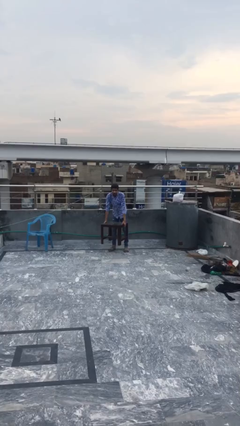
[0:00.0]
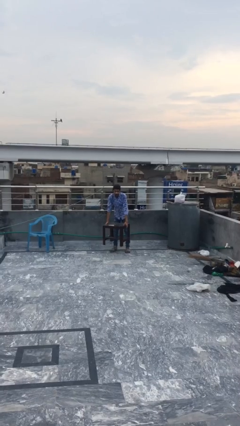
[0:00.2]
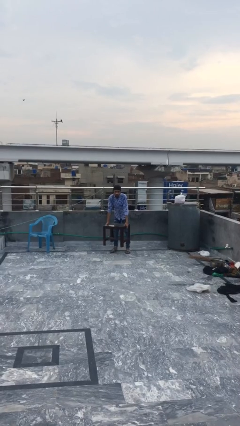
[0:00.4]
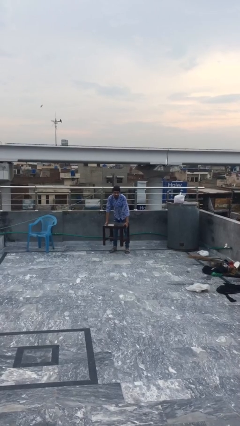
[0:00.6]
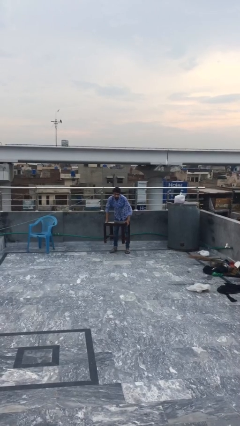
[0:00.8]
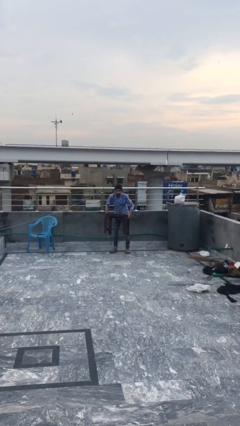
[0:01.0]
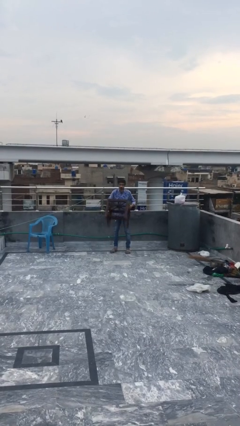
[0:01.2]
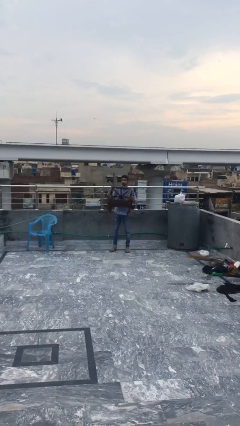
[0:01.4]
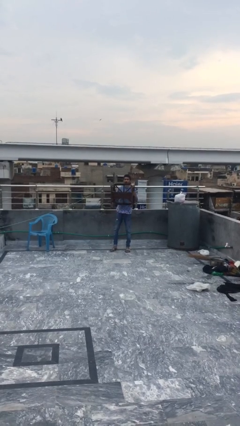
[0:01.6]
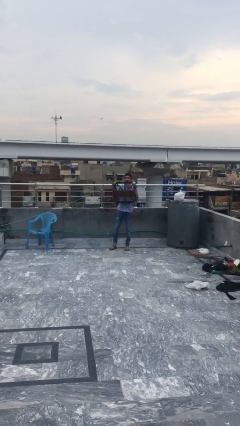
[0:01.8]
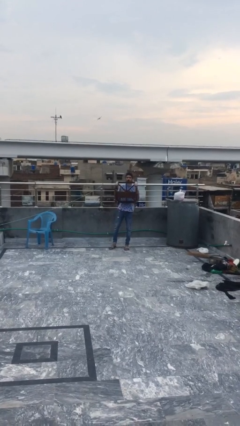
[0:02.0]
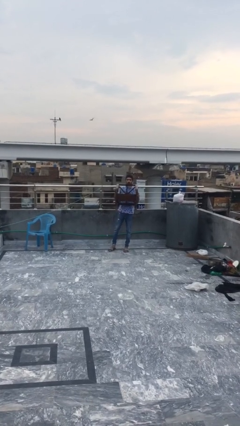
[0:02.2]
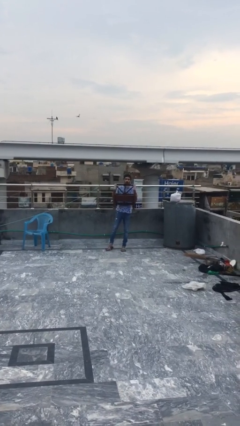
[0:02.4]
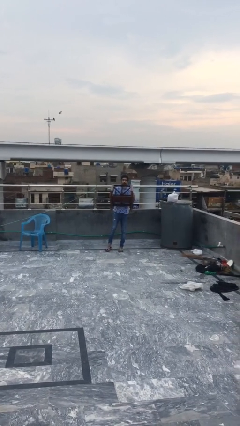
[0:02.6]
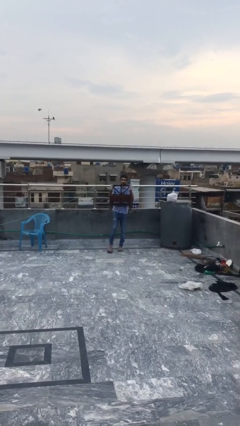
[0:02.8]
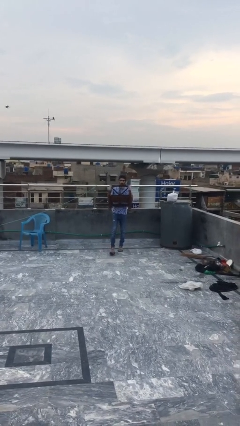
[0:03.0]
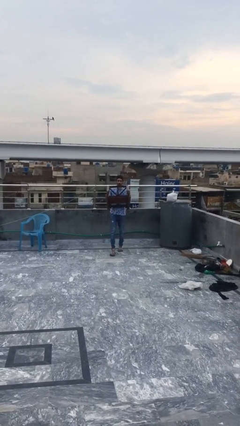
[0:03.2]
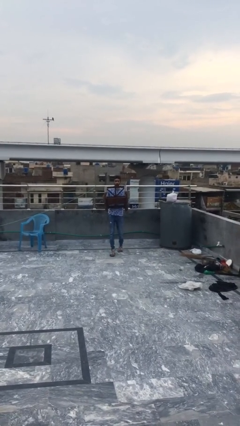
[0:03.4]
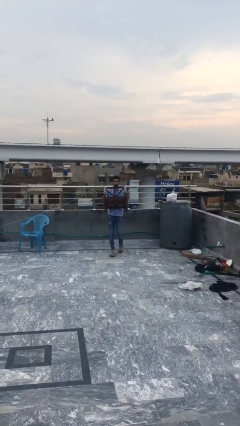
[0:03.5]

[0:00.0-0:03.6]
person carries heavy object

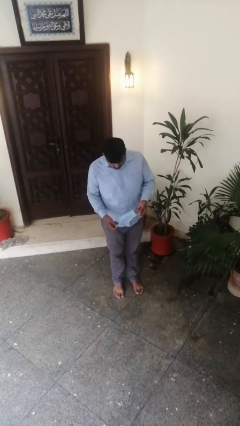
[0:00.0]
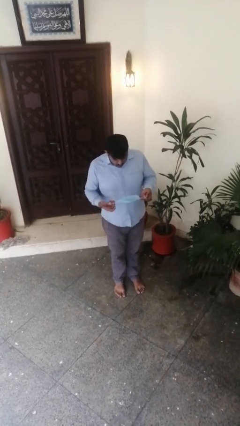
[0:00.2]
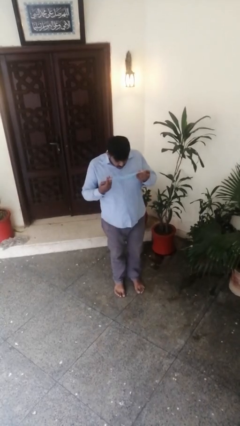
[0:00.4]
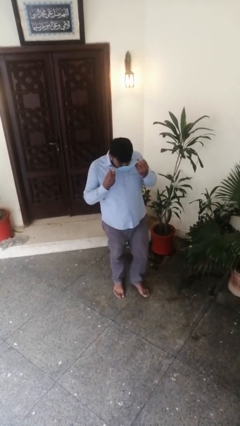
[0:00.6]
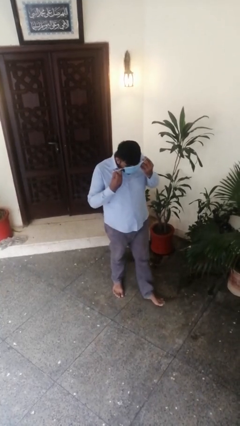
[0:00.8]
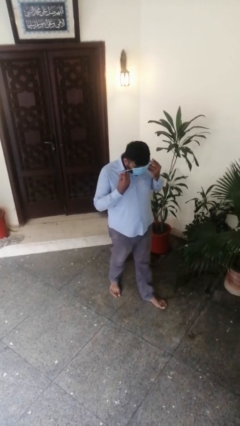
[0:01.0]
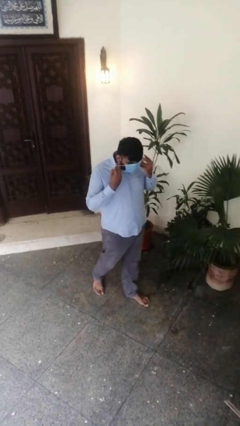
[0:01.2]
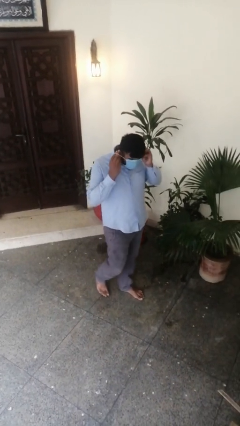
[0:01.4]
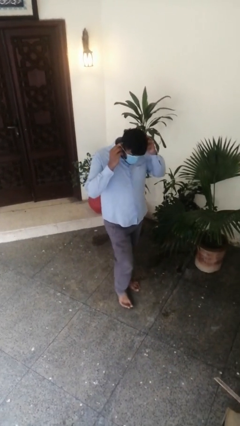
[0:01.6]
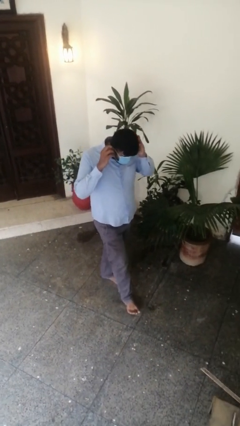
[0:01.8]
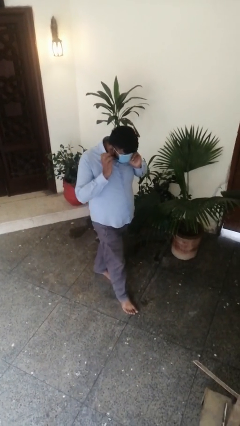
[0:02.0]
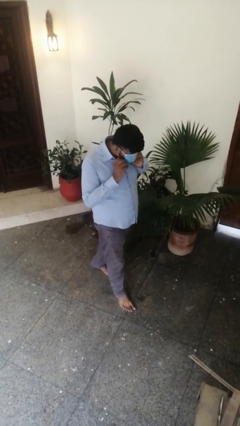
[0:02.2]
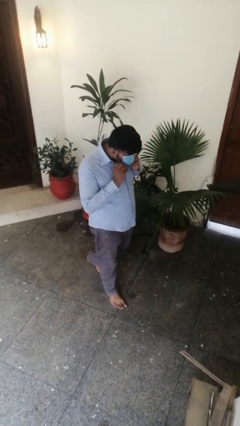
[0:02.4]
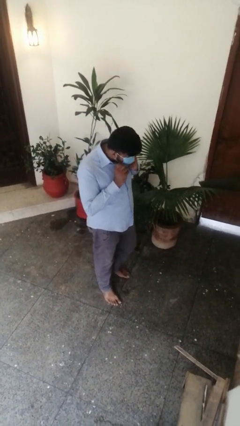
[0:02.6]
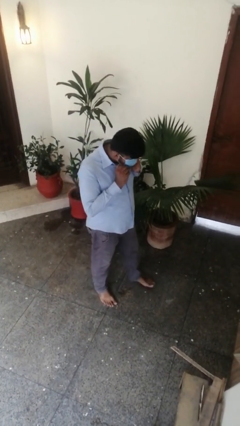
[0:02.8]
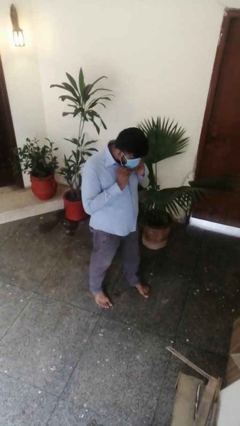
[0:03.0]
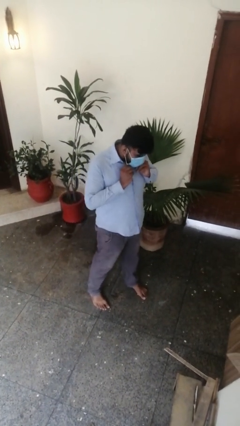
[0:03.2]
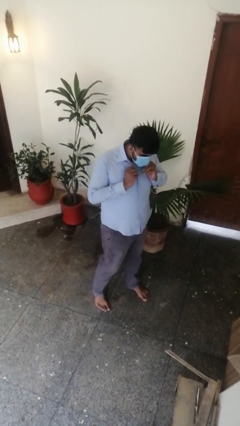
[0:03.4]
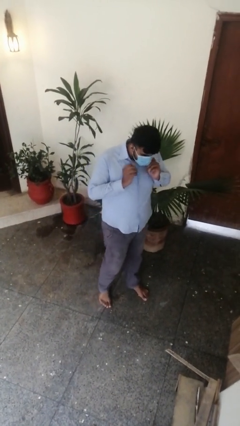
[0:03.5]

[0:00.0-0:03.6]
person puts on facemask

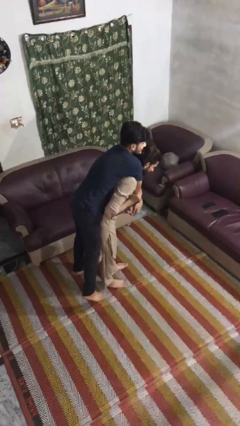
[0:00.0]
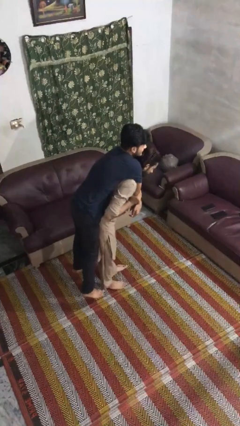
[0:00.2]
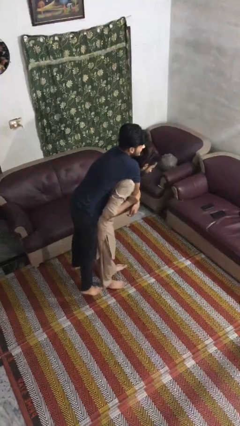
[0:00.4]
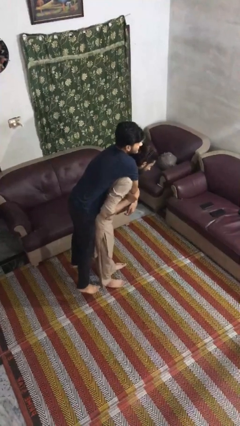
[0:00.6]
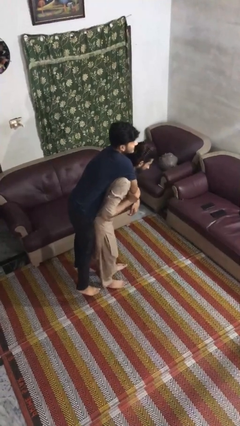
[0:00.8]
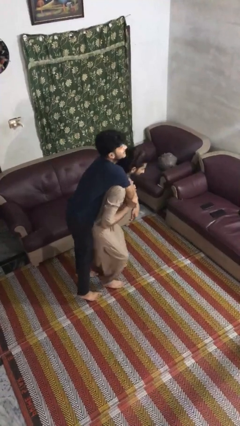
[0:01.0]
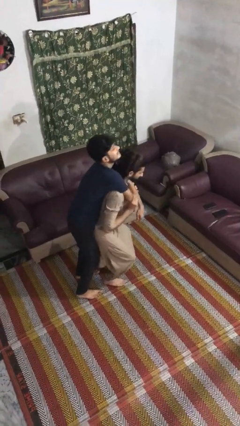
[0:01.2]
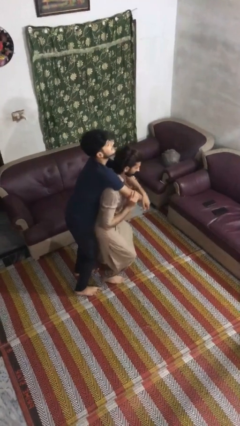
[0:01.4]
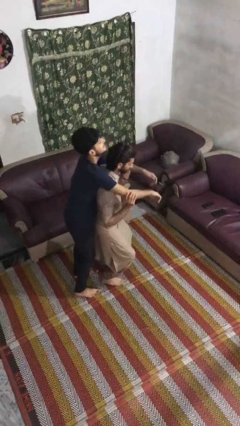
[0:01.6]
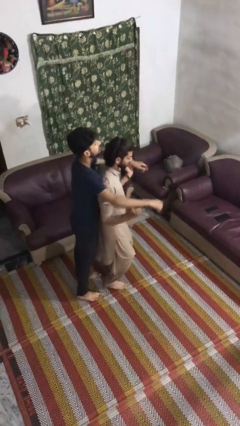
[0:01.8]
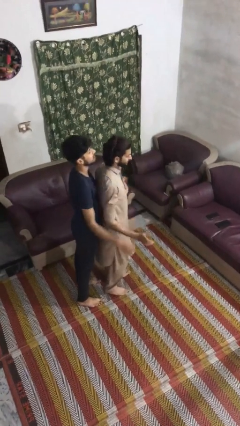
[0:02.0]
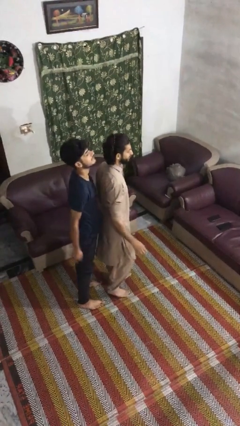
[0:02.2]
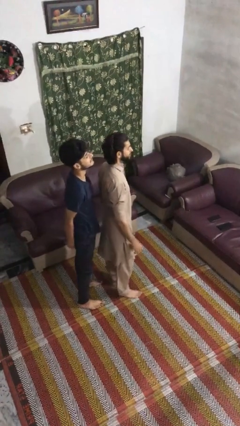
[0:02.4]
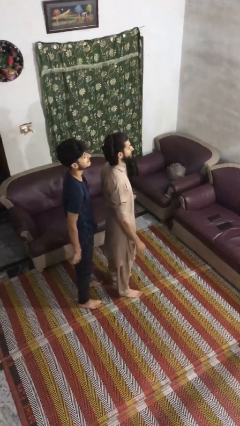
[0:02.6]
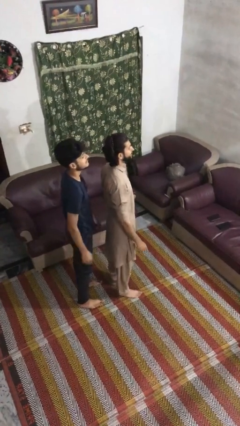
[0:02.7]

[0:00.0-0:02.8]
person puts down person

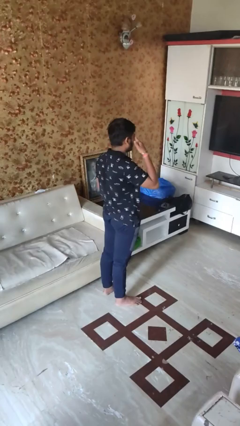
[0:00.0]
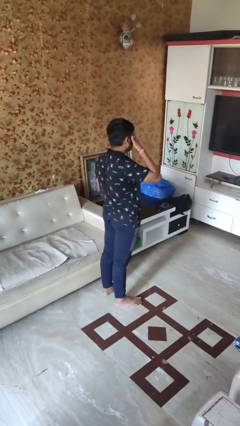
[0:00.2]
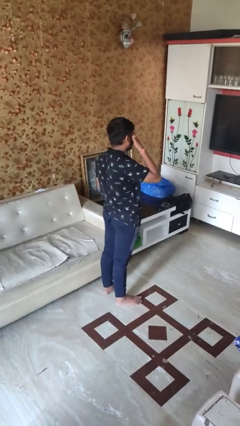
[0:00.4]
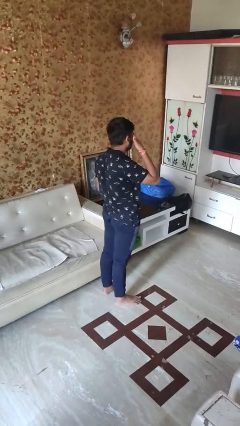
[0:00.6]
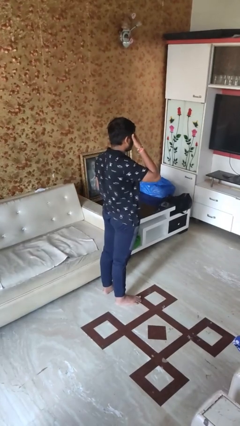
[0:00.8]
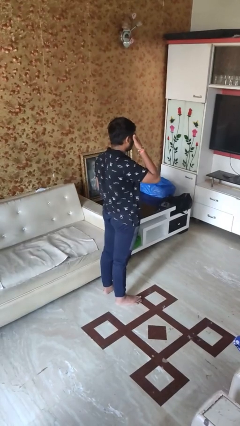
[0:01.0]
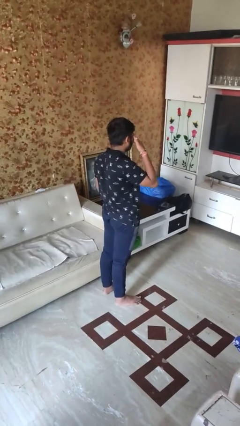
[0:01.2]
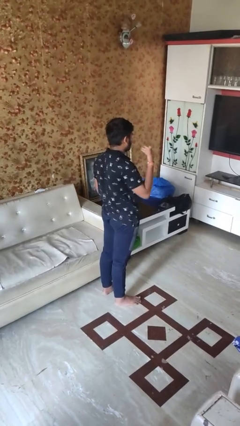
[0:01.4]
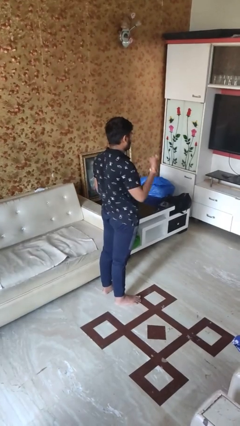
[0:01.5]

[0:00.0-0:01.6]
person rubs eyes

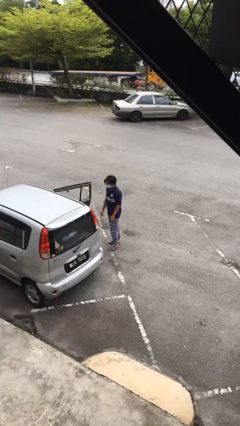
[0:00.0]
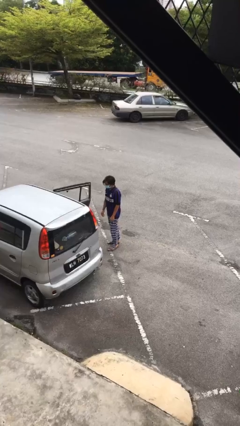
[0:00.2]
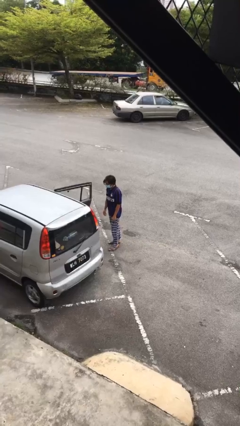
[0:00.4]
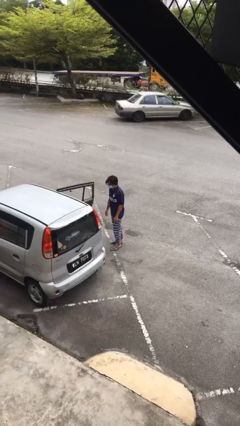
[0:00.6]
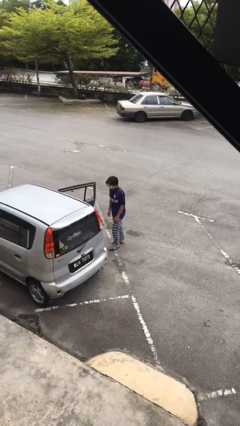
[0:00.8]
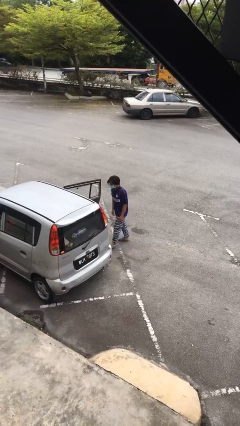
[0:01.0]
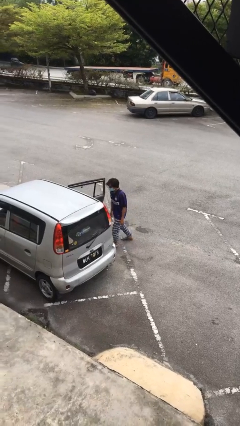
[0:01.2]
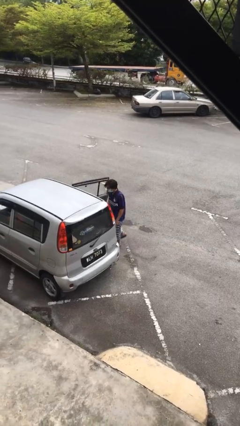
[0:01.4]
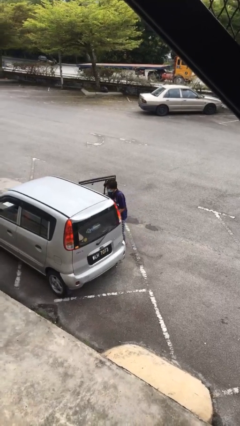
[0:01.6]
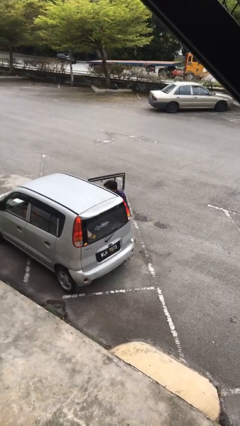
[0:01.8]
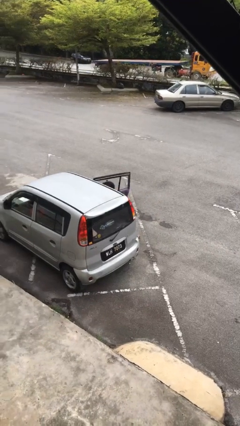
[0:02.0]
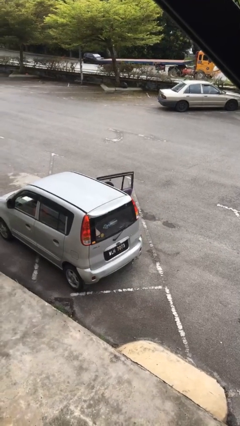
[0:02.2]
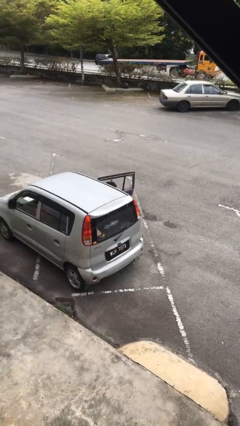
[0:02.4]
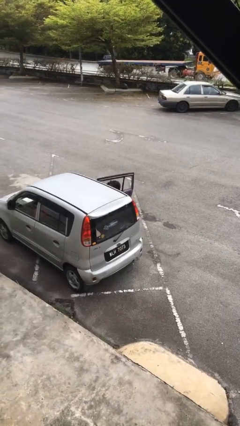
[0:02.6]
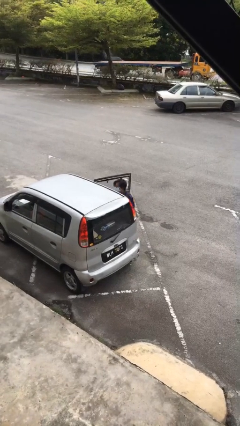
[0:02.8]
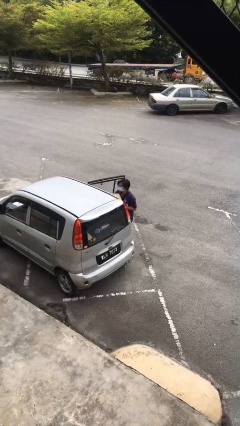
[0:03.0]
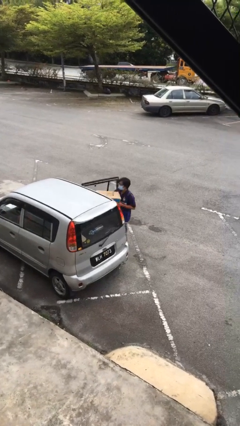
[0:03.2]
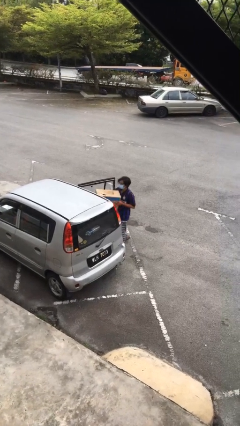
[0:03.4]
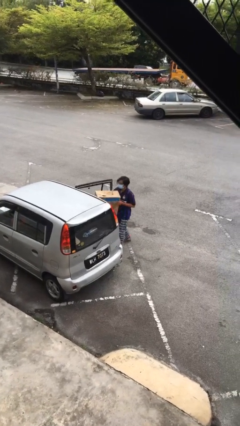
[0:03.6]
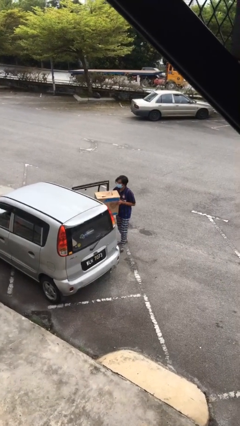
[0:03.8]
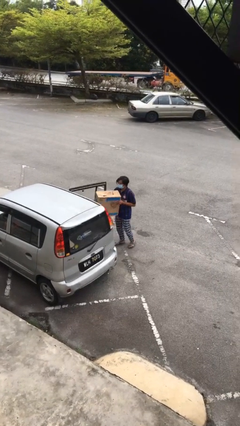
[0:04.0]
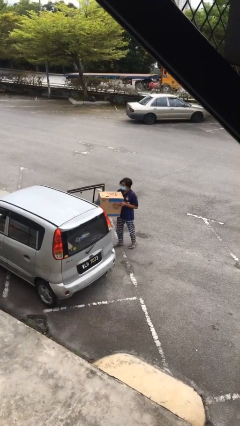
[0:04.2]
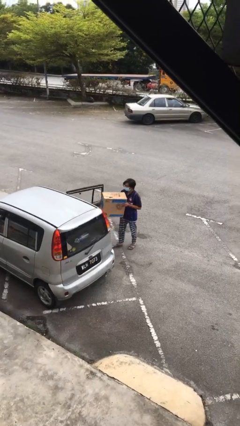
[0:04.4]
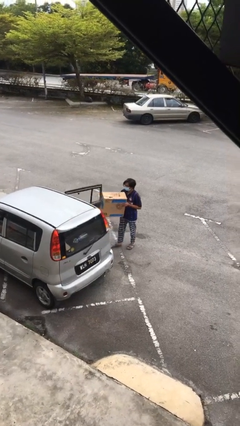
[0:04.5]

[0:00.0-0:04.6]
person unloads car

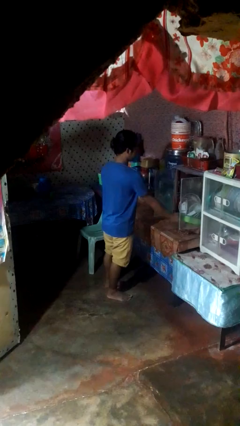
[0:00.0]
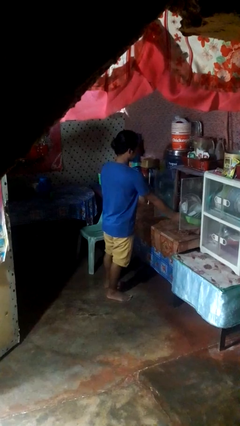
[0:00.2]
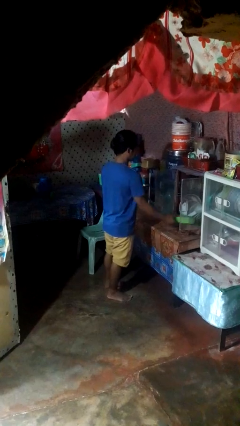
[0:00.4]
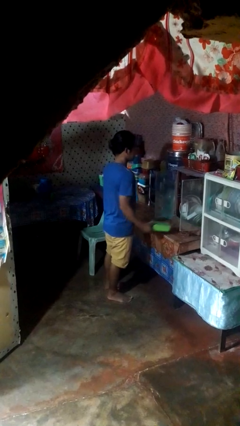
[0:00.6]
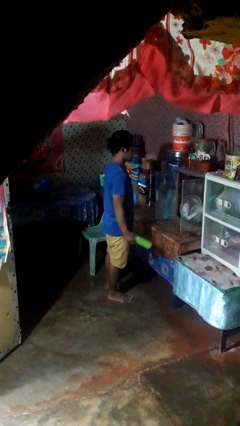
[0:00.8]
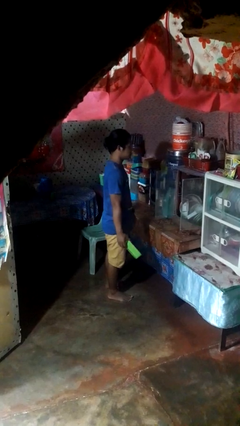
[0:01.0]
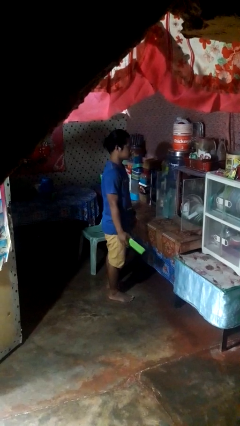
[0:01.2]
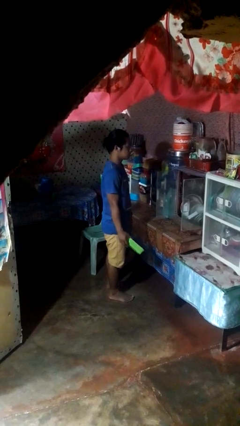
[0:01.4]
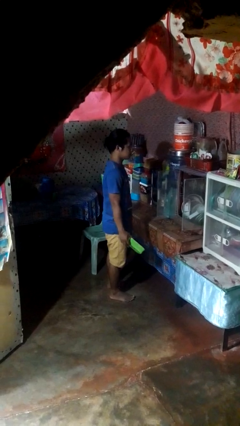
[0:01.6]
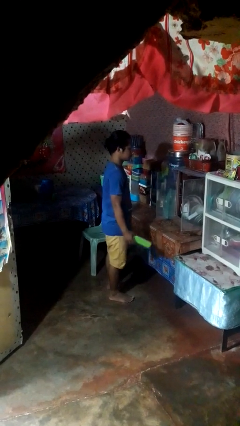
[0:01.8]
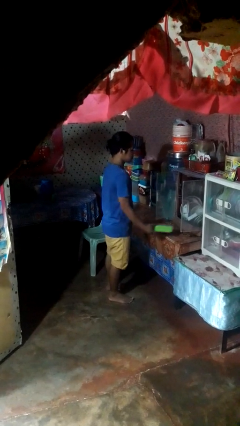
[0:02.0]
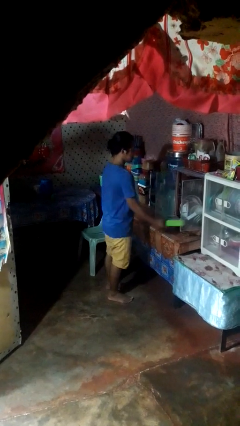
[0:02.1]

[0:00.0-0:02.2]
person picks up object from cabinet
